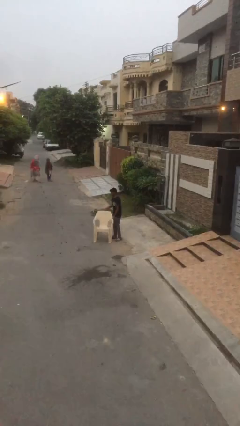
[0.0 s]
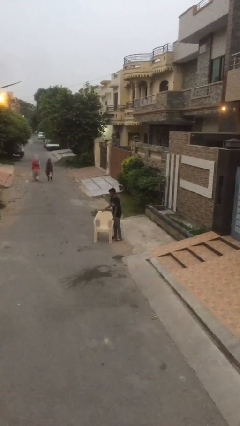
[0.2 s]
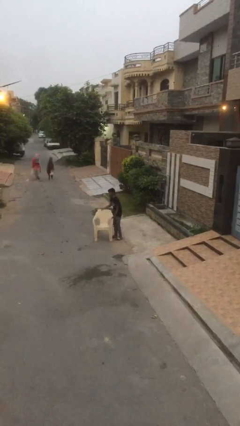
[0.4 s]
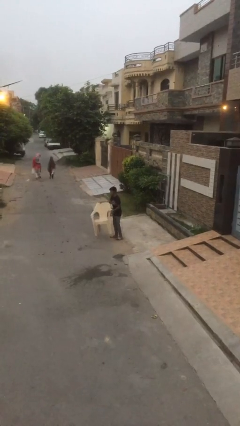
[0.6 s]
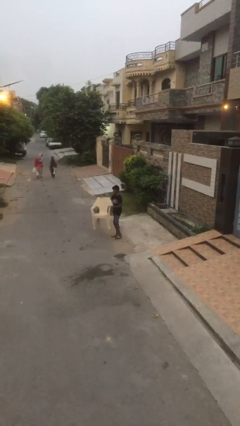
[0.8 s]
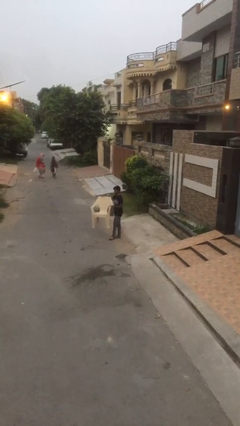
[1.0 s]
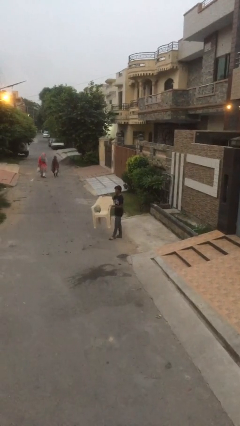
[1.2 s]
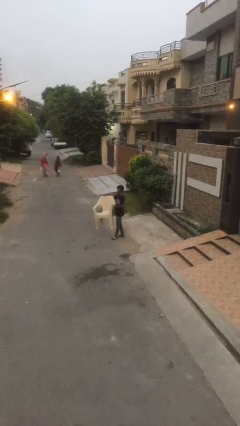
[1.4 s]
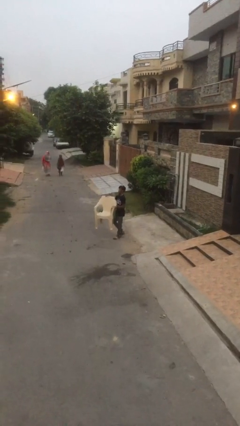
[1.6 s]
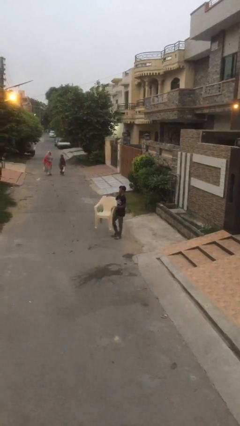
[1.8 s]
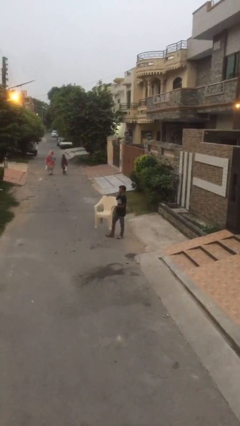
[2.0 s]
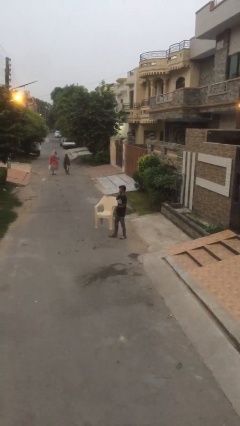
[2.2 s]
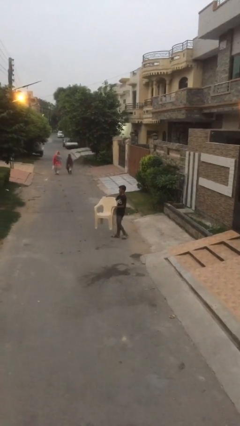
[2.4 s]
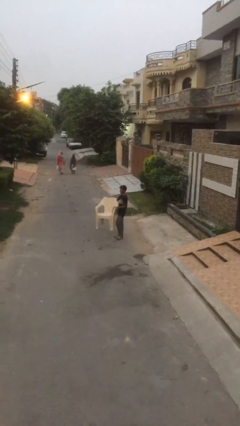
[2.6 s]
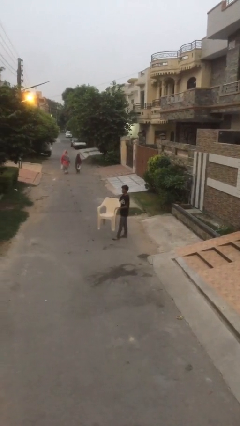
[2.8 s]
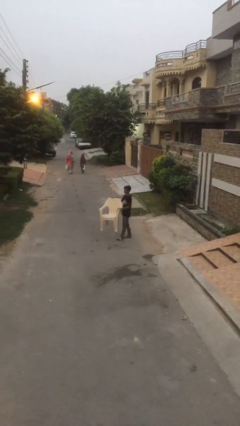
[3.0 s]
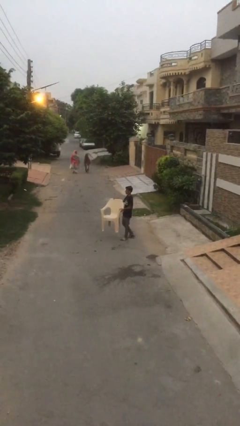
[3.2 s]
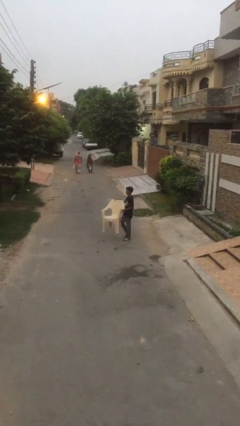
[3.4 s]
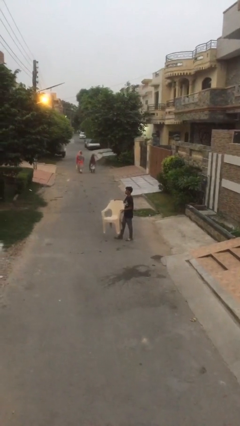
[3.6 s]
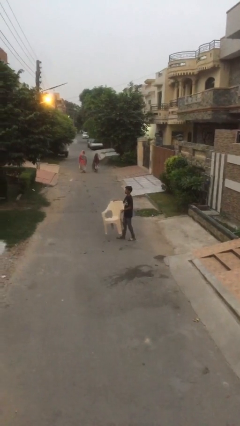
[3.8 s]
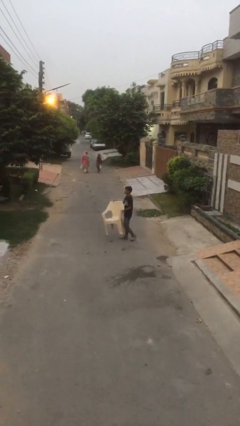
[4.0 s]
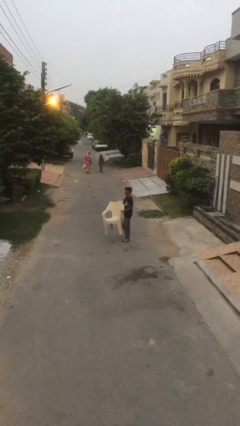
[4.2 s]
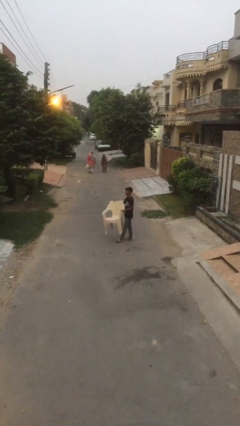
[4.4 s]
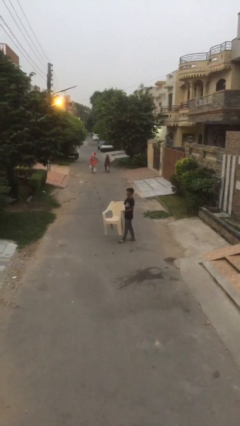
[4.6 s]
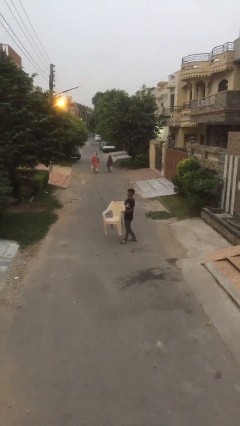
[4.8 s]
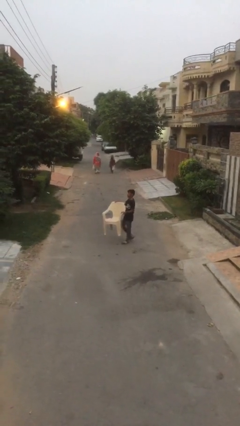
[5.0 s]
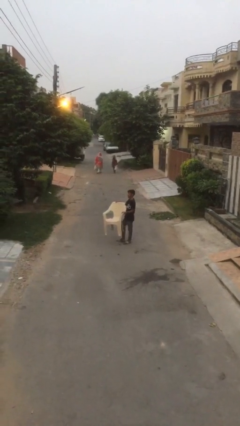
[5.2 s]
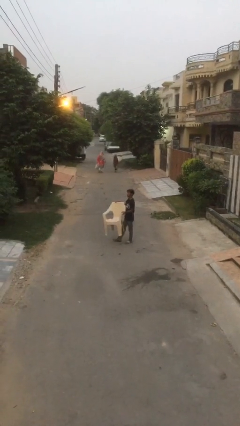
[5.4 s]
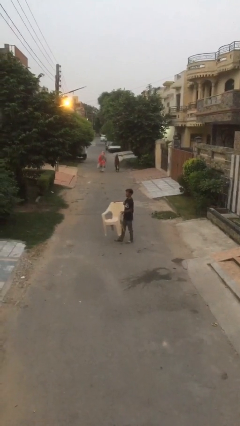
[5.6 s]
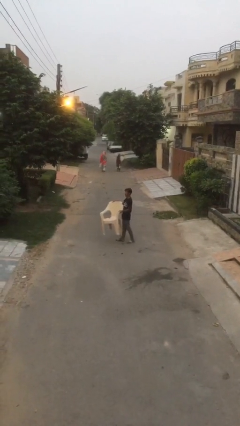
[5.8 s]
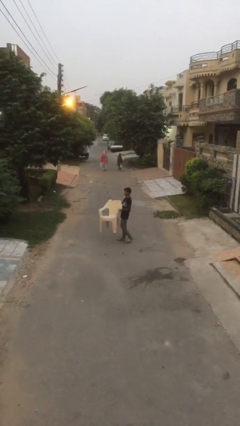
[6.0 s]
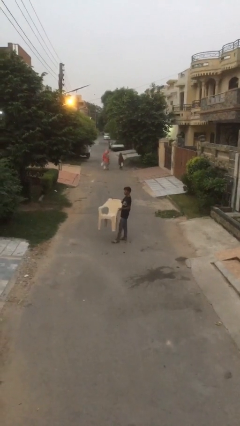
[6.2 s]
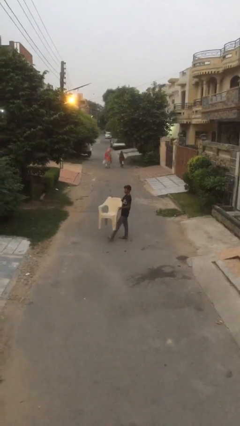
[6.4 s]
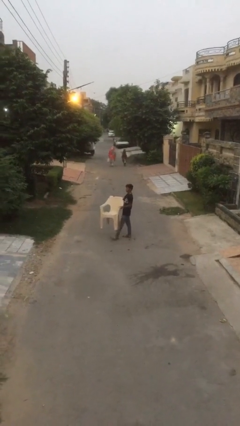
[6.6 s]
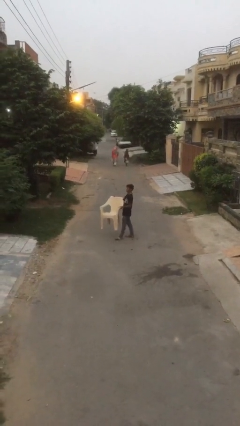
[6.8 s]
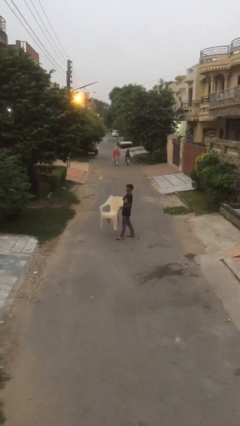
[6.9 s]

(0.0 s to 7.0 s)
person carries heavy object

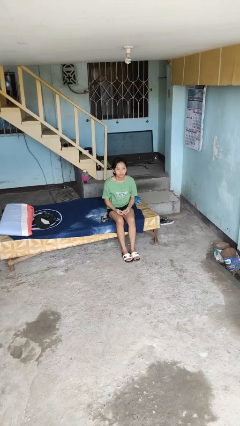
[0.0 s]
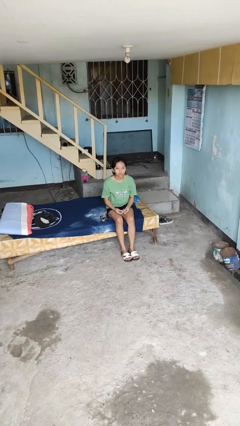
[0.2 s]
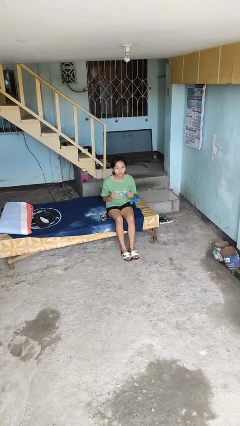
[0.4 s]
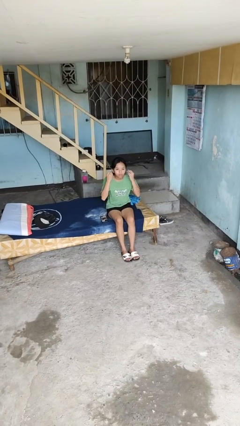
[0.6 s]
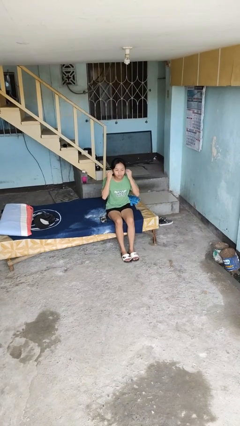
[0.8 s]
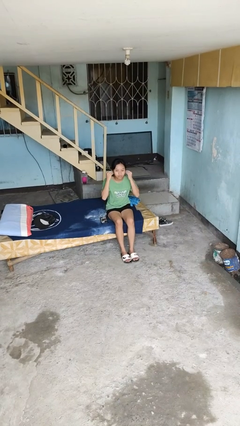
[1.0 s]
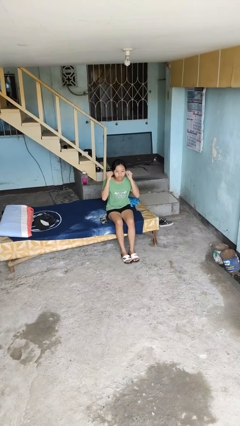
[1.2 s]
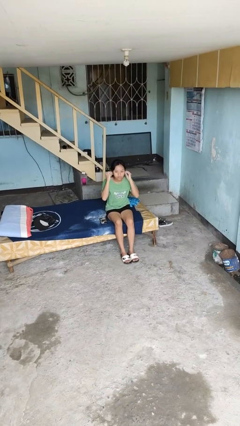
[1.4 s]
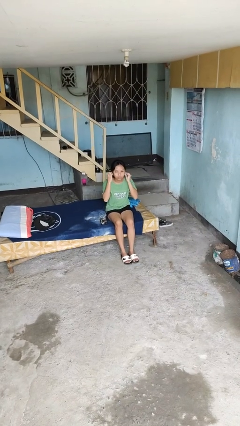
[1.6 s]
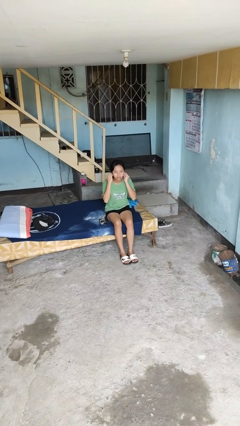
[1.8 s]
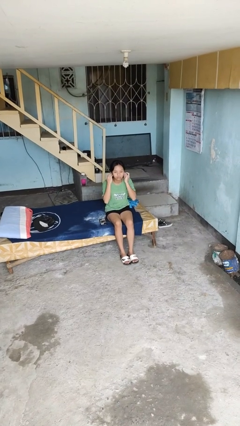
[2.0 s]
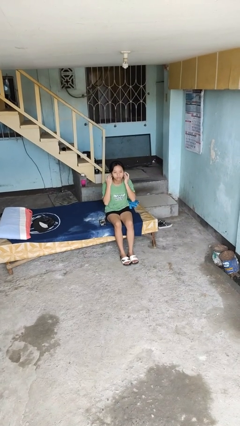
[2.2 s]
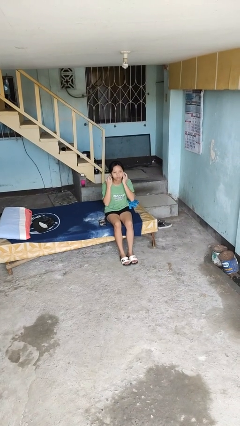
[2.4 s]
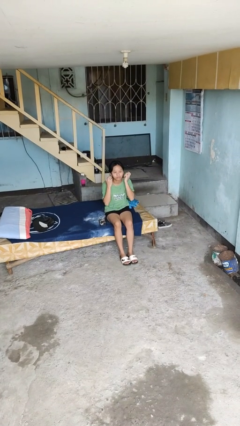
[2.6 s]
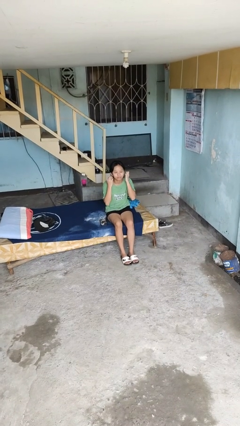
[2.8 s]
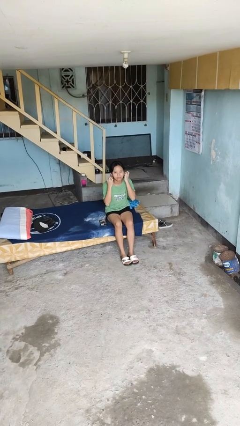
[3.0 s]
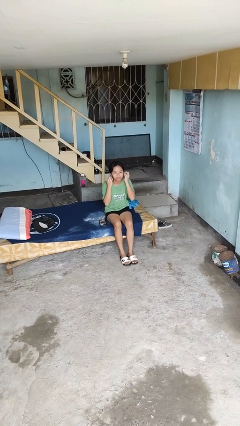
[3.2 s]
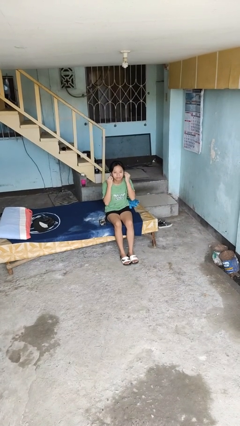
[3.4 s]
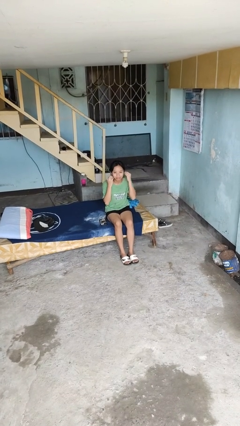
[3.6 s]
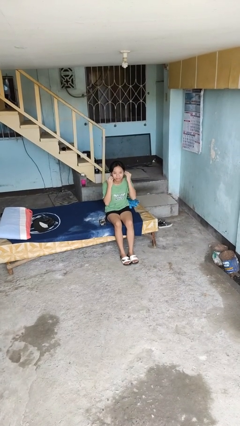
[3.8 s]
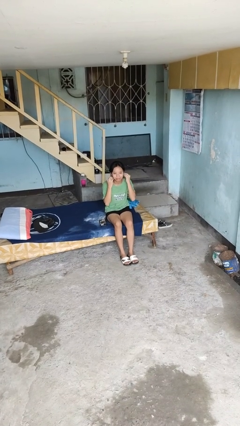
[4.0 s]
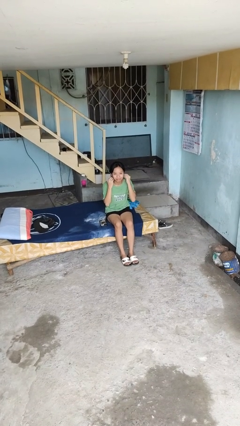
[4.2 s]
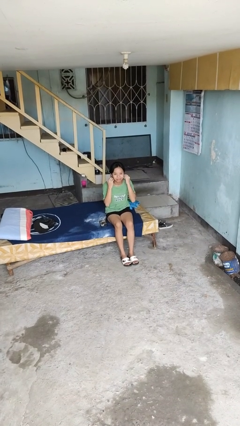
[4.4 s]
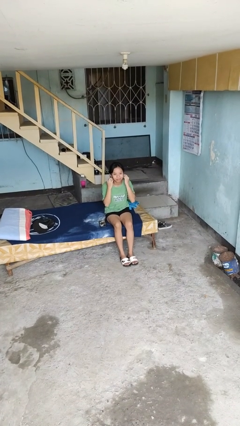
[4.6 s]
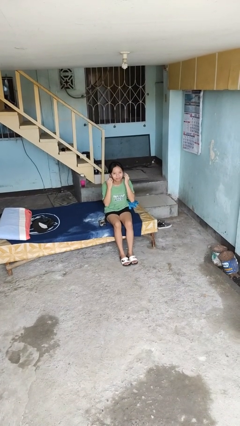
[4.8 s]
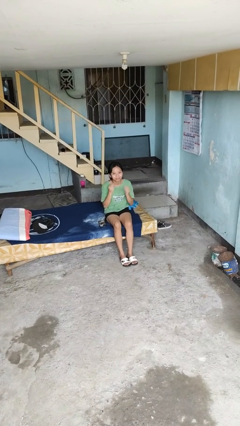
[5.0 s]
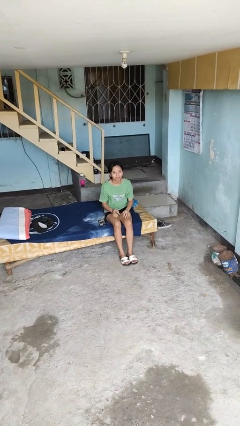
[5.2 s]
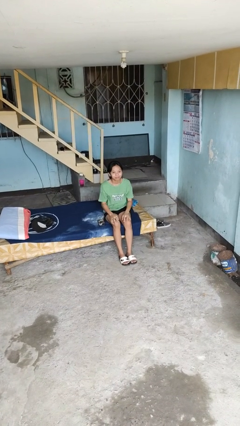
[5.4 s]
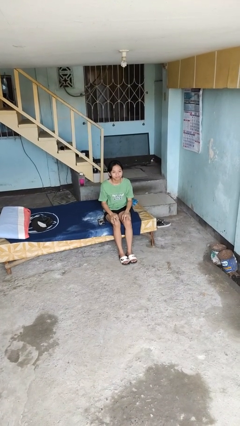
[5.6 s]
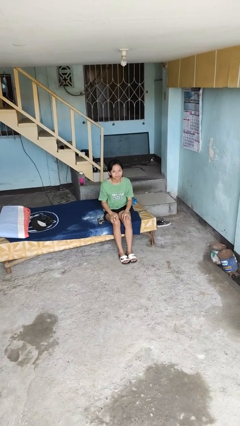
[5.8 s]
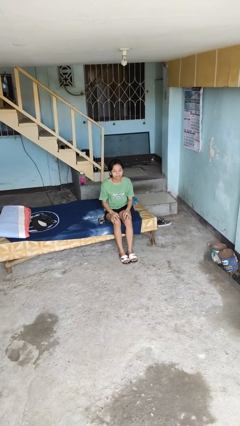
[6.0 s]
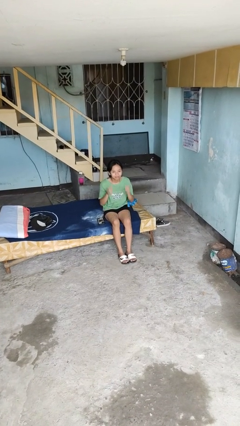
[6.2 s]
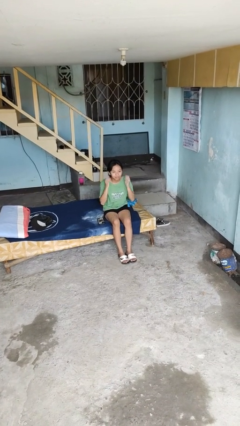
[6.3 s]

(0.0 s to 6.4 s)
person puts on headphones

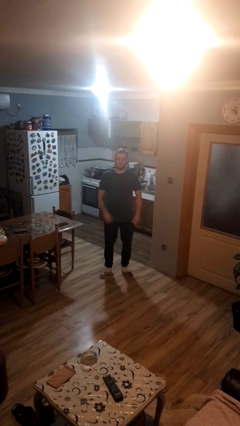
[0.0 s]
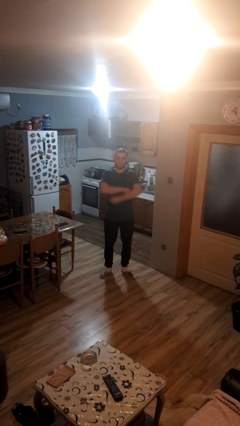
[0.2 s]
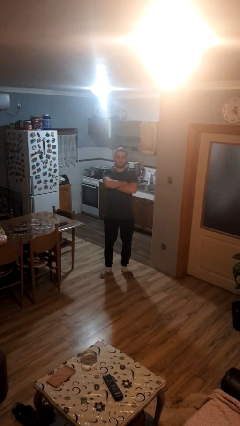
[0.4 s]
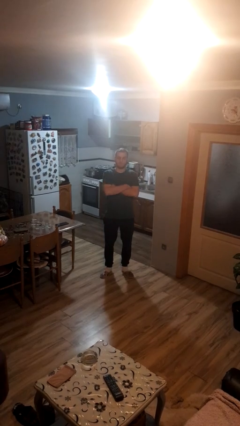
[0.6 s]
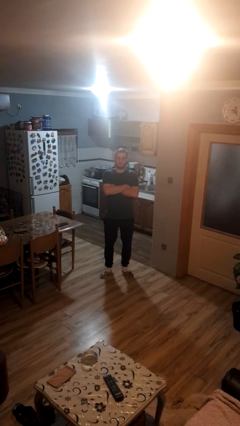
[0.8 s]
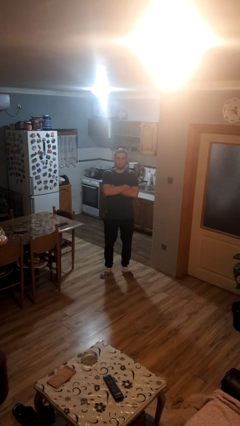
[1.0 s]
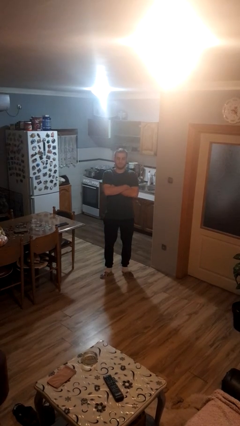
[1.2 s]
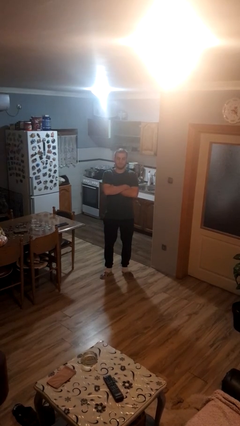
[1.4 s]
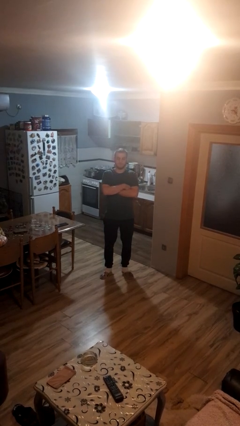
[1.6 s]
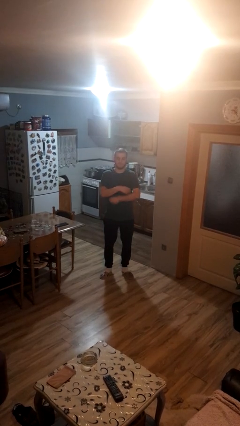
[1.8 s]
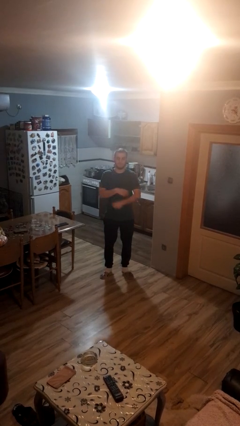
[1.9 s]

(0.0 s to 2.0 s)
person crosses arms

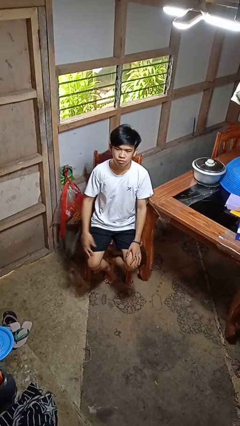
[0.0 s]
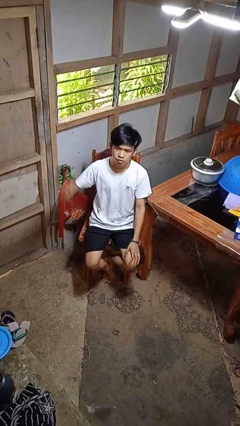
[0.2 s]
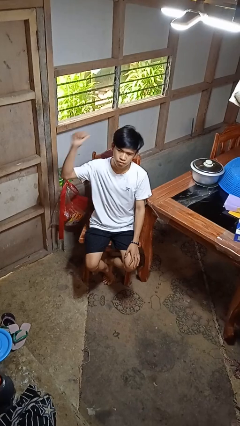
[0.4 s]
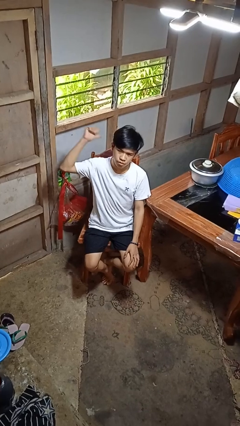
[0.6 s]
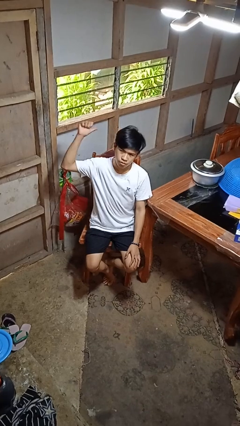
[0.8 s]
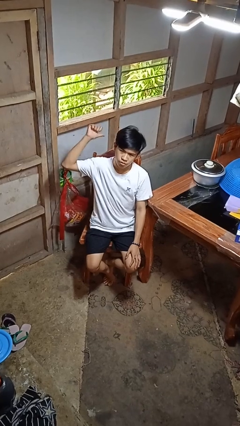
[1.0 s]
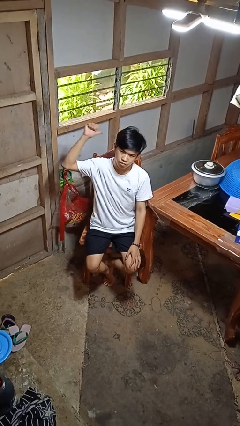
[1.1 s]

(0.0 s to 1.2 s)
person gestures behind me

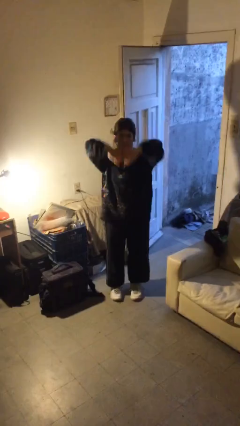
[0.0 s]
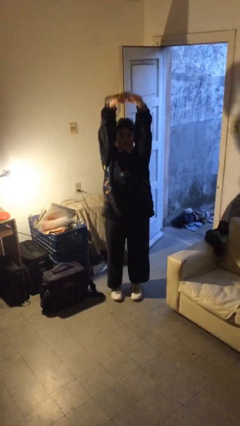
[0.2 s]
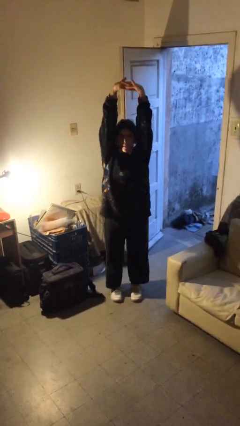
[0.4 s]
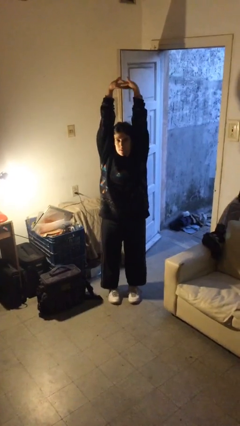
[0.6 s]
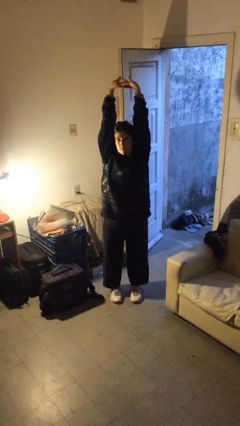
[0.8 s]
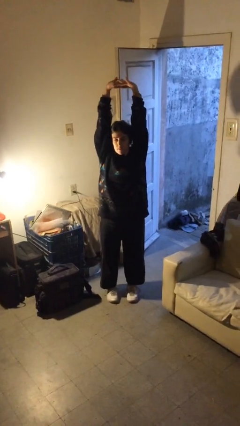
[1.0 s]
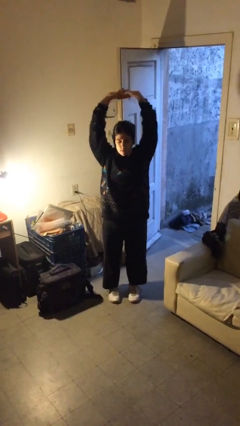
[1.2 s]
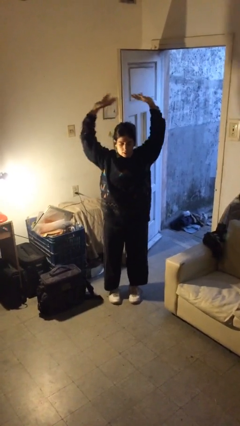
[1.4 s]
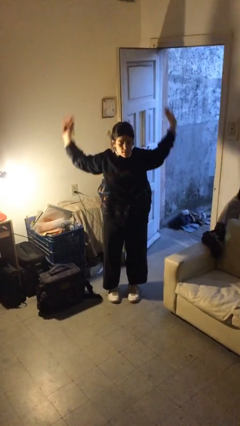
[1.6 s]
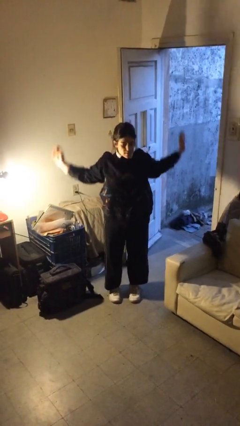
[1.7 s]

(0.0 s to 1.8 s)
person stretches arms over head
